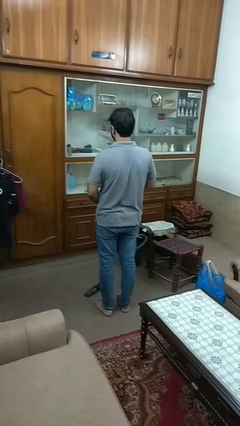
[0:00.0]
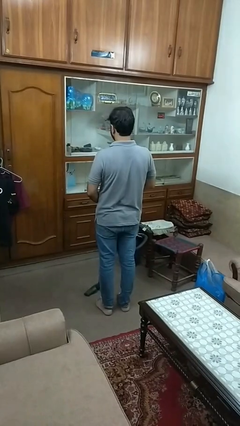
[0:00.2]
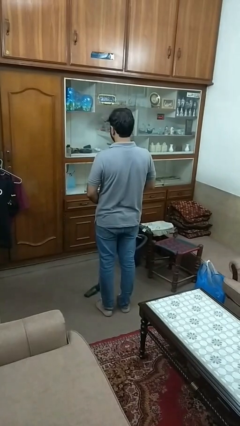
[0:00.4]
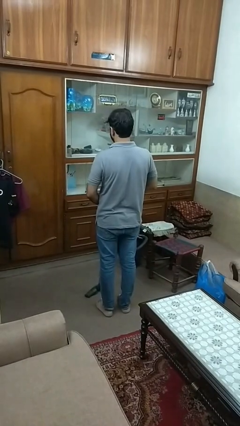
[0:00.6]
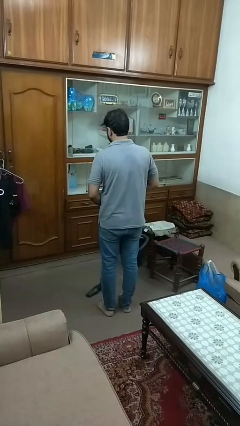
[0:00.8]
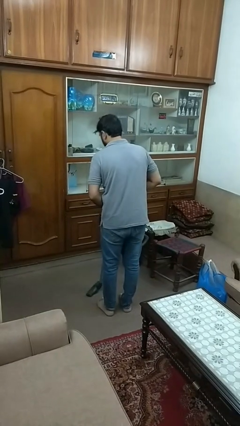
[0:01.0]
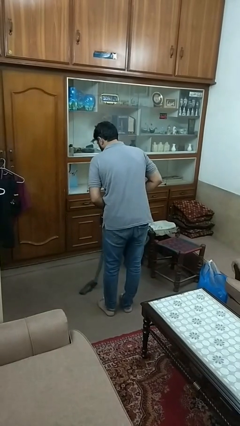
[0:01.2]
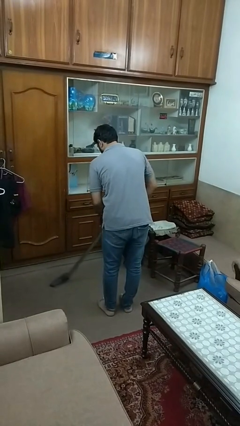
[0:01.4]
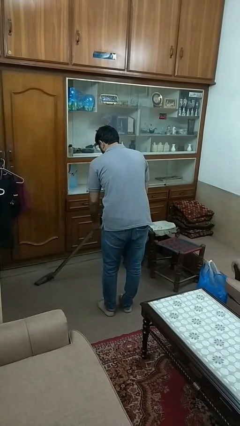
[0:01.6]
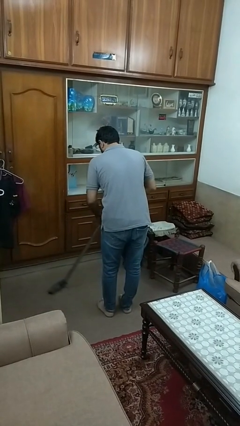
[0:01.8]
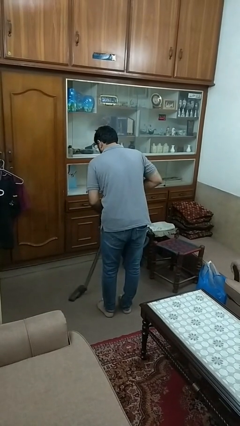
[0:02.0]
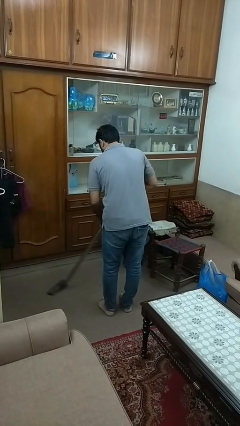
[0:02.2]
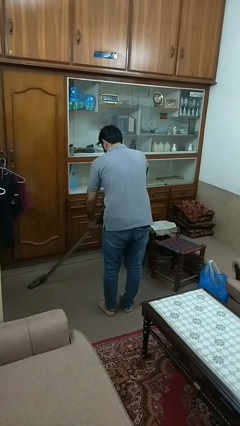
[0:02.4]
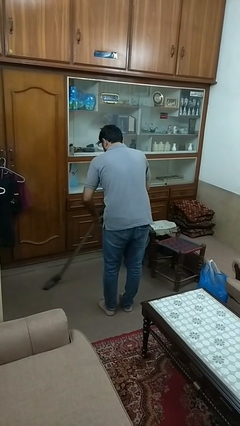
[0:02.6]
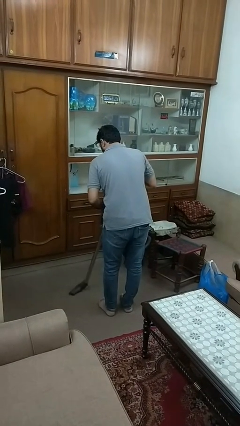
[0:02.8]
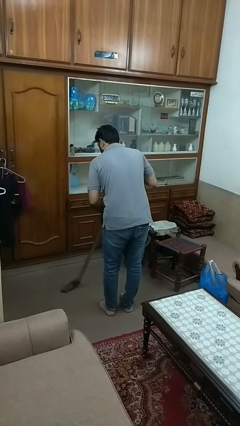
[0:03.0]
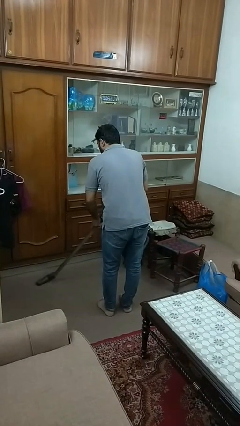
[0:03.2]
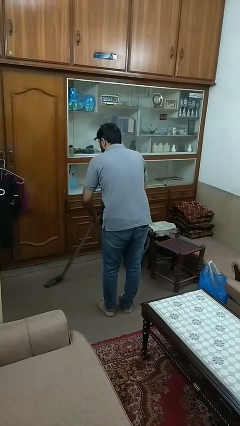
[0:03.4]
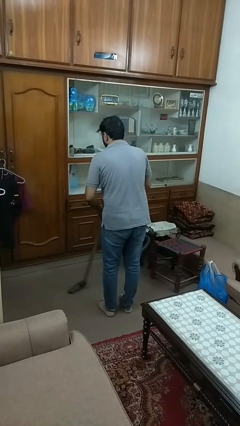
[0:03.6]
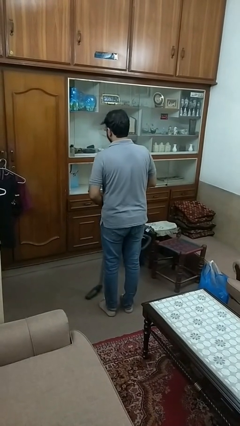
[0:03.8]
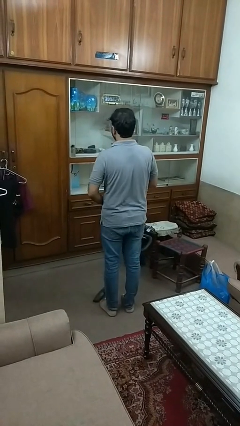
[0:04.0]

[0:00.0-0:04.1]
person vacuums carpet

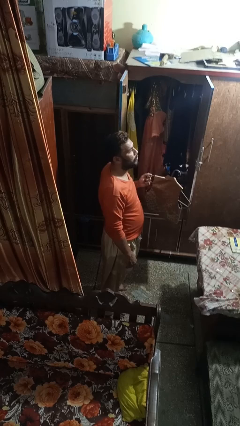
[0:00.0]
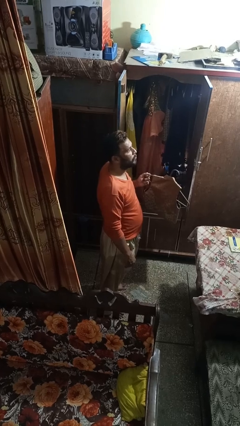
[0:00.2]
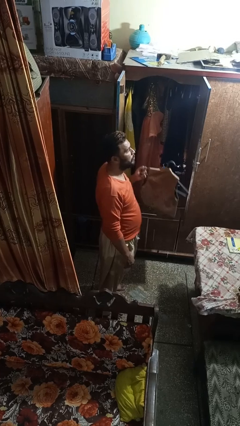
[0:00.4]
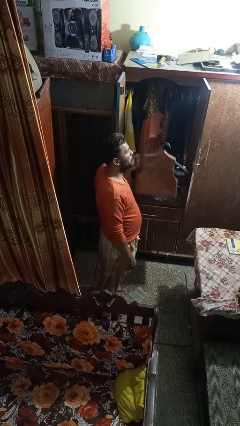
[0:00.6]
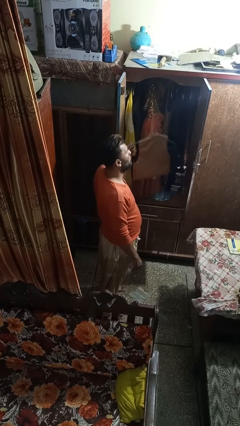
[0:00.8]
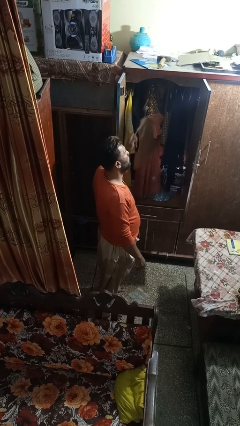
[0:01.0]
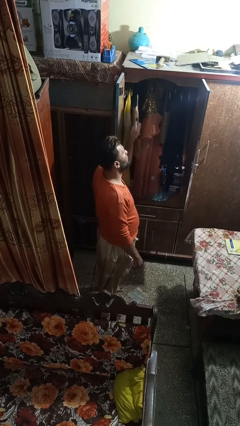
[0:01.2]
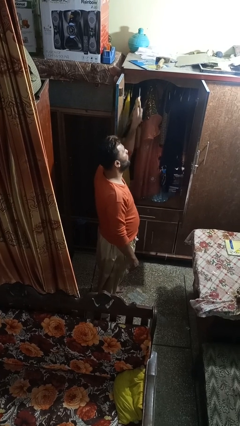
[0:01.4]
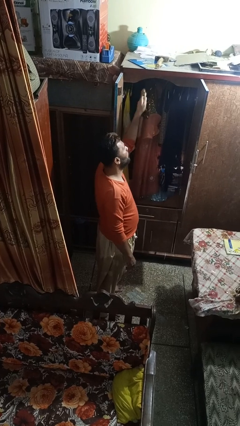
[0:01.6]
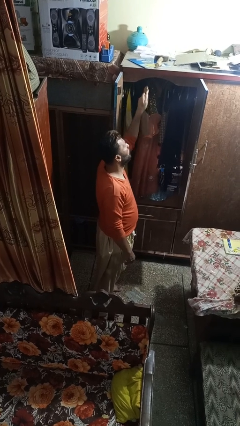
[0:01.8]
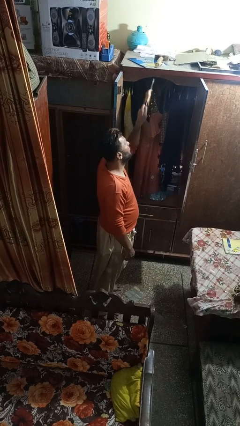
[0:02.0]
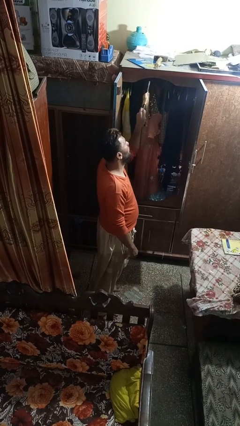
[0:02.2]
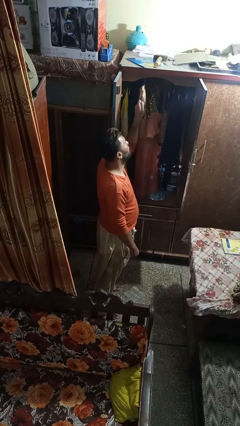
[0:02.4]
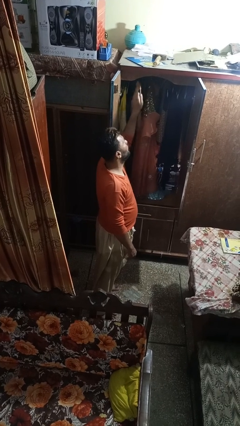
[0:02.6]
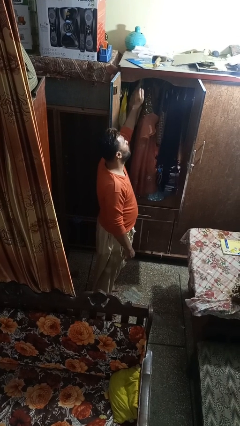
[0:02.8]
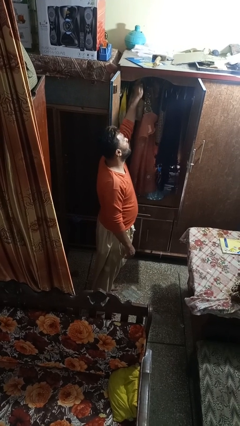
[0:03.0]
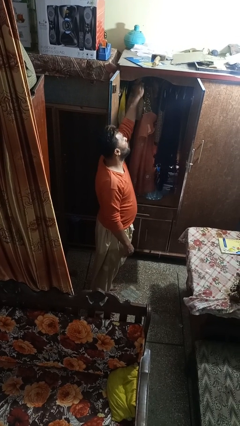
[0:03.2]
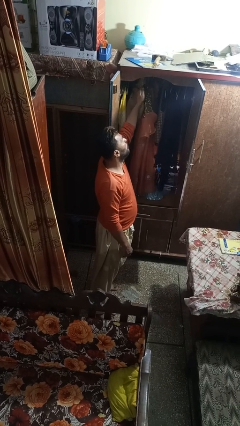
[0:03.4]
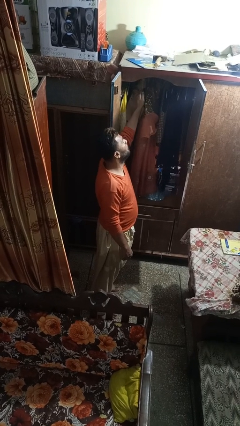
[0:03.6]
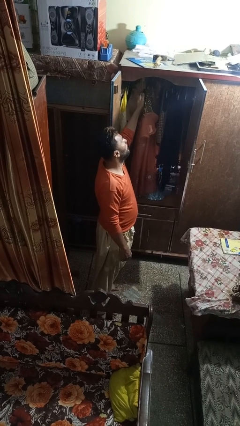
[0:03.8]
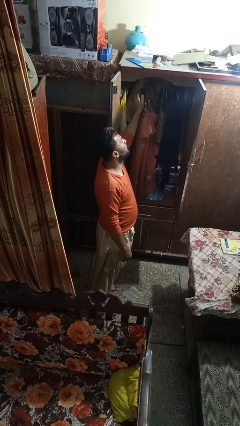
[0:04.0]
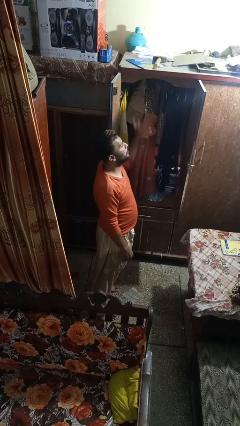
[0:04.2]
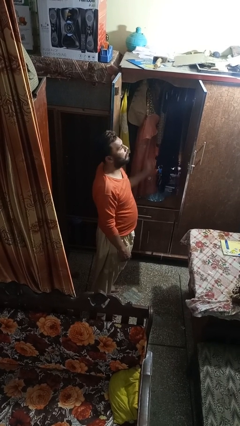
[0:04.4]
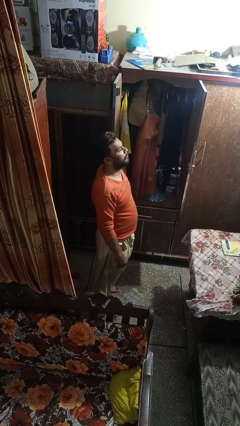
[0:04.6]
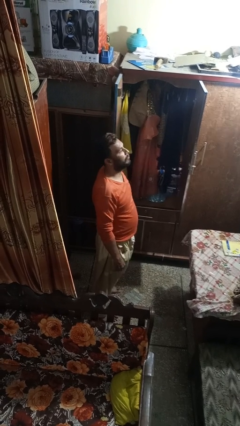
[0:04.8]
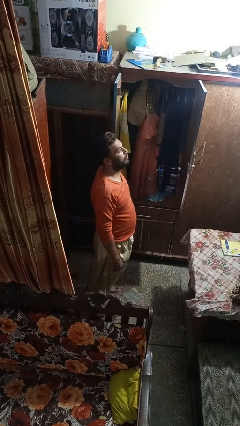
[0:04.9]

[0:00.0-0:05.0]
person puts clothes into closet

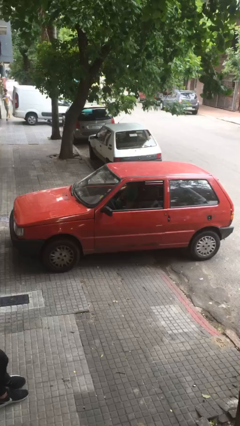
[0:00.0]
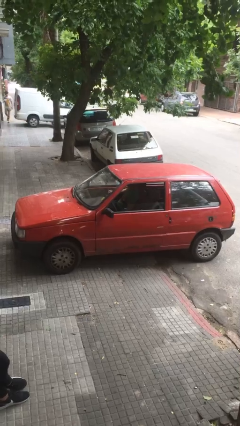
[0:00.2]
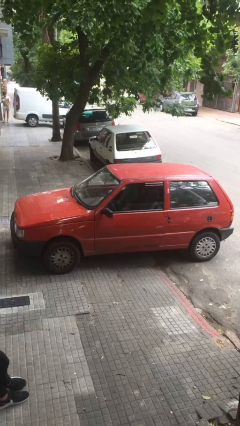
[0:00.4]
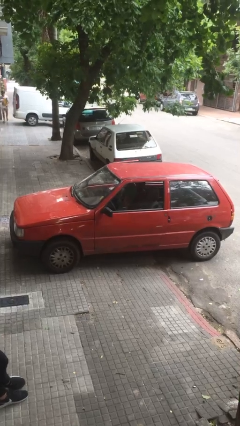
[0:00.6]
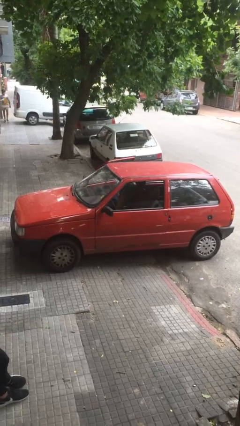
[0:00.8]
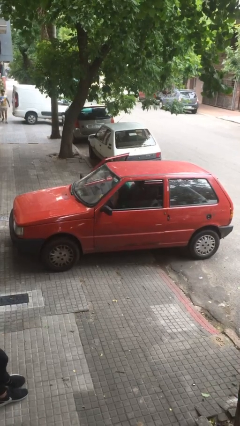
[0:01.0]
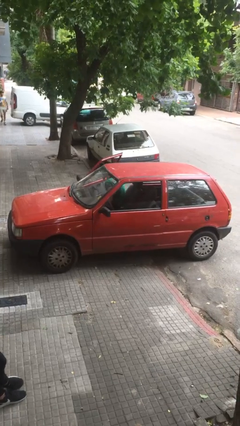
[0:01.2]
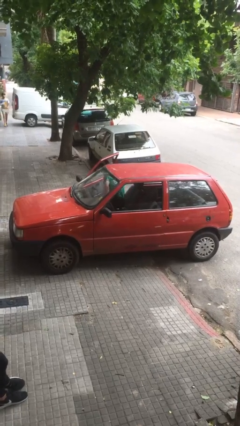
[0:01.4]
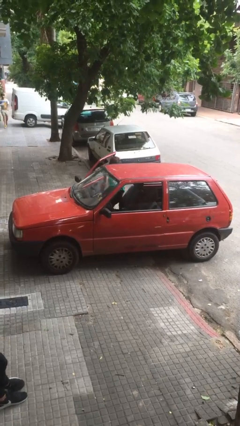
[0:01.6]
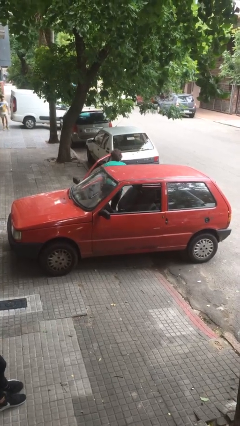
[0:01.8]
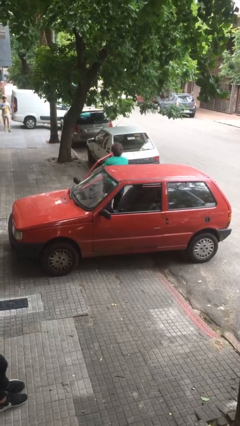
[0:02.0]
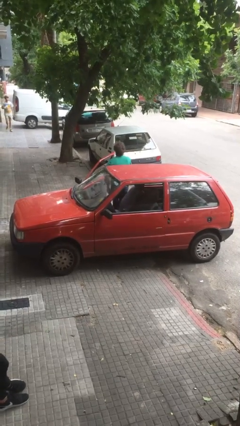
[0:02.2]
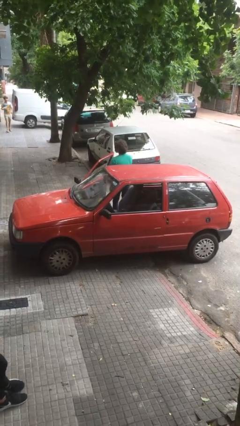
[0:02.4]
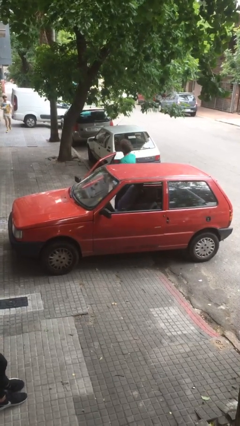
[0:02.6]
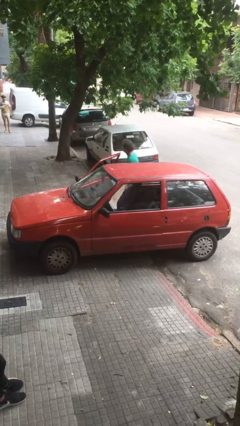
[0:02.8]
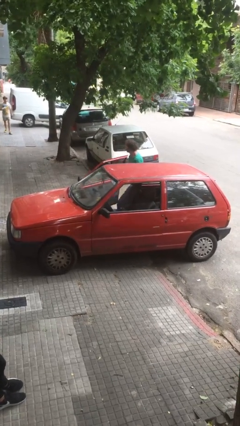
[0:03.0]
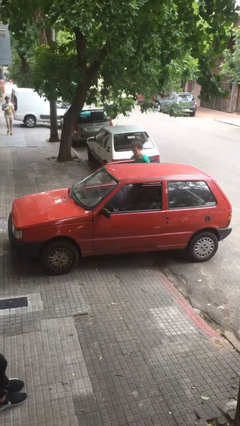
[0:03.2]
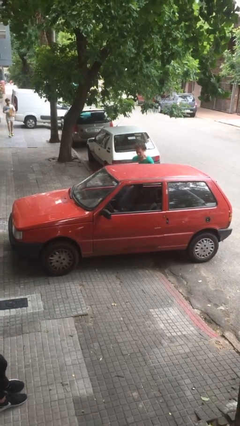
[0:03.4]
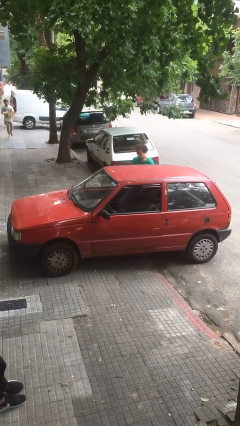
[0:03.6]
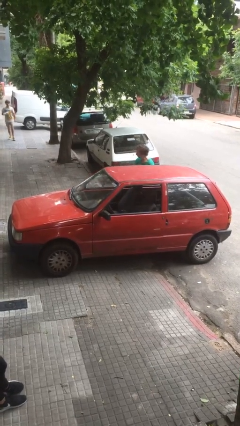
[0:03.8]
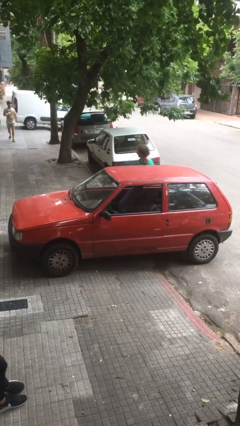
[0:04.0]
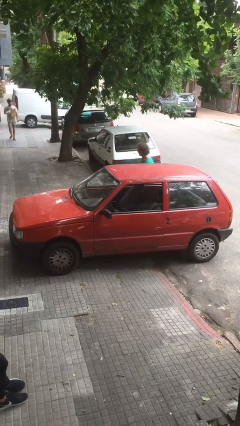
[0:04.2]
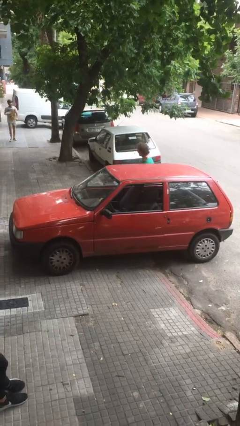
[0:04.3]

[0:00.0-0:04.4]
car drops off person

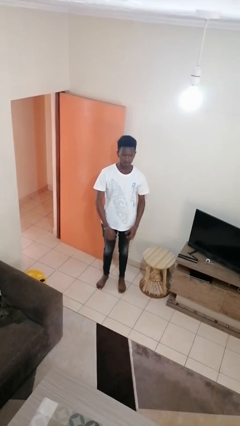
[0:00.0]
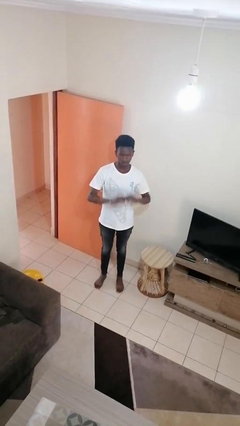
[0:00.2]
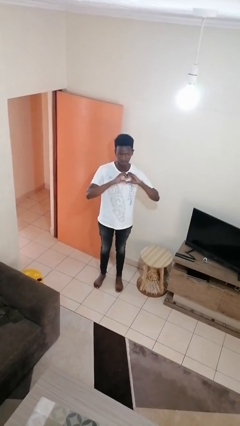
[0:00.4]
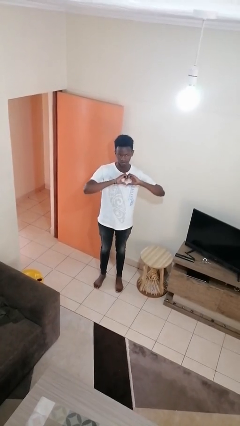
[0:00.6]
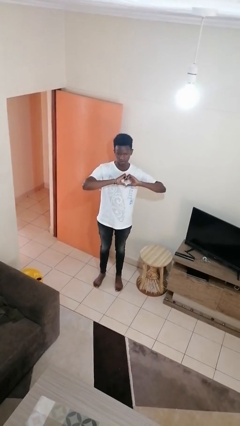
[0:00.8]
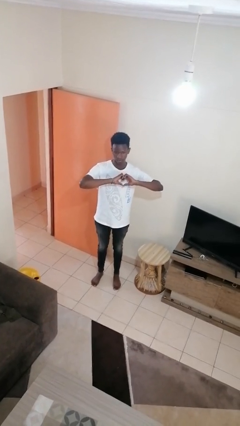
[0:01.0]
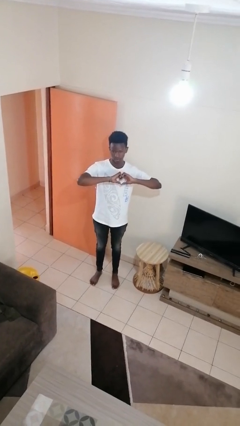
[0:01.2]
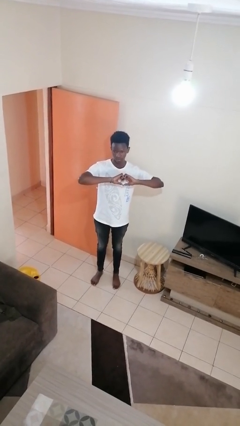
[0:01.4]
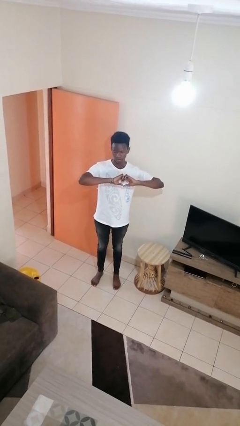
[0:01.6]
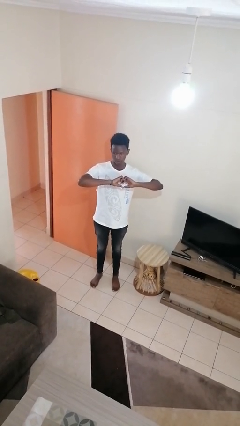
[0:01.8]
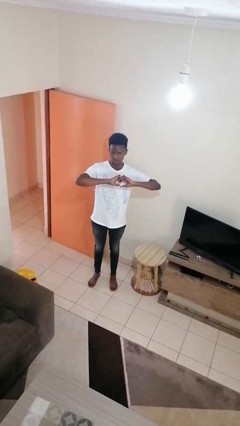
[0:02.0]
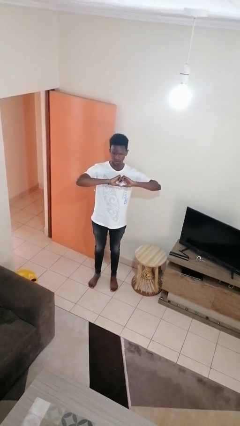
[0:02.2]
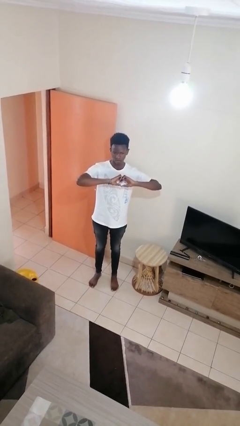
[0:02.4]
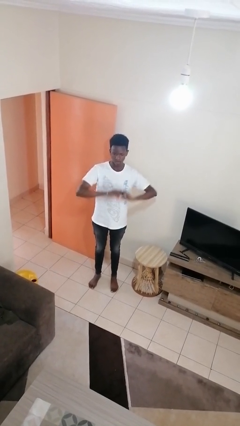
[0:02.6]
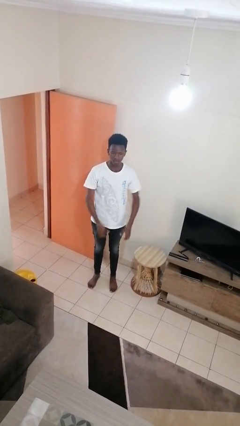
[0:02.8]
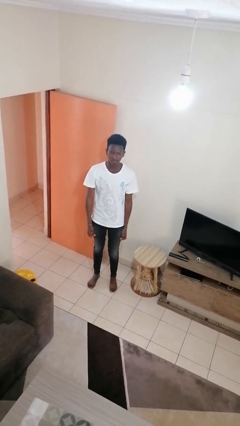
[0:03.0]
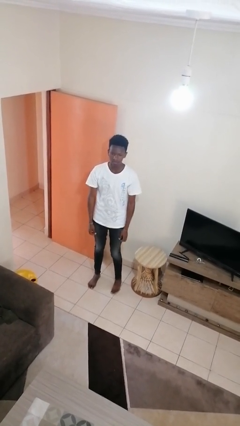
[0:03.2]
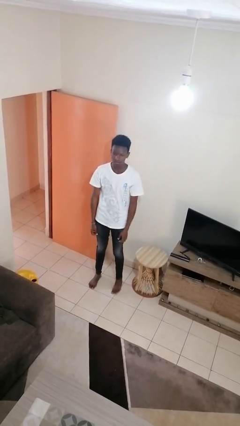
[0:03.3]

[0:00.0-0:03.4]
person gestures heart

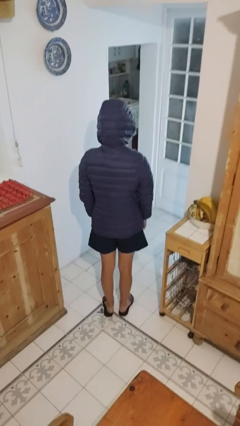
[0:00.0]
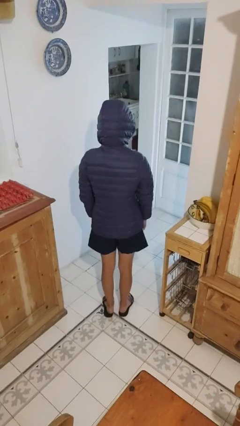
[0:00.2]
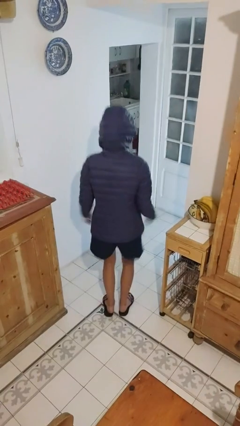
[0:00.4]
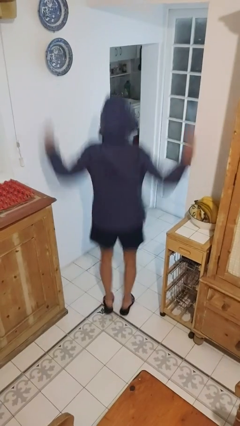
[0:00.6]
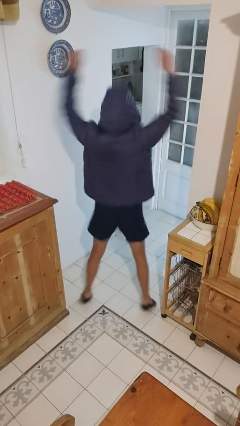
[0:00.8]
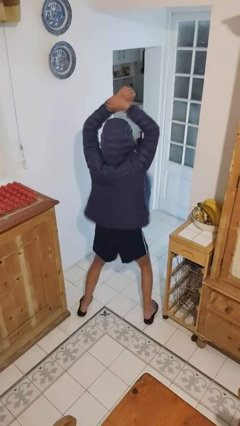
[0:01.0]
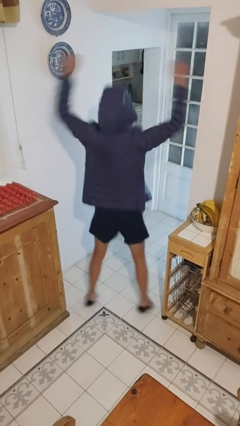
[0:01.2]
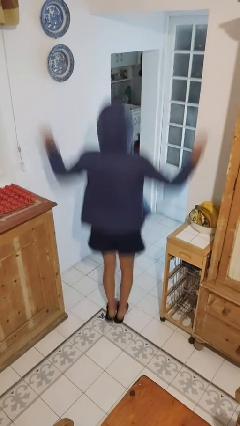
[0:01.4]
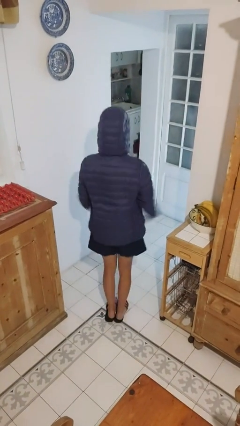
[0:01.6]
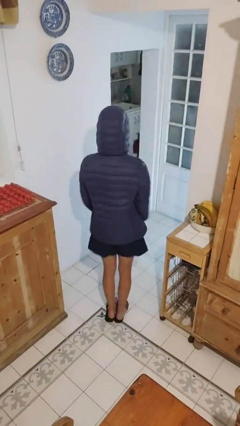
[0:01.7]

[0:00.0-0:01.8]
person exercises with jumping jacks
